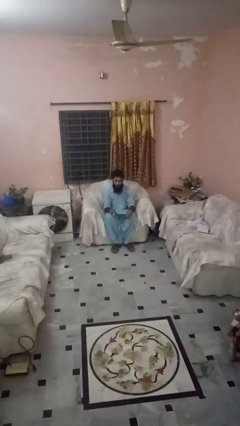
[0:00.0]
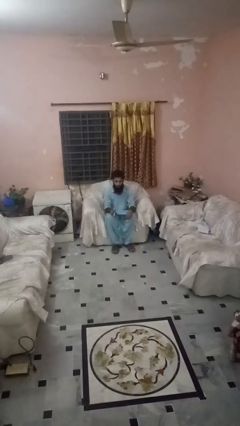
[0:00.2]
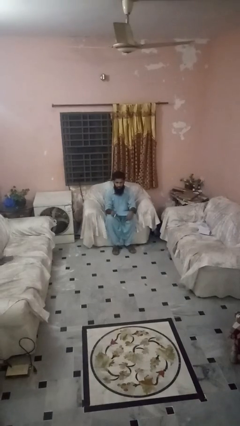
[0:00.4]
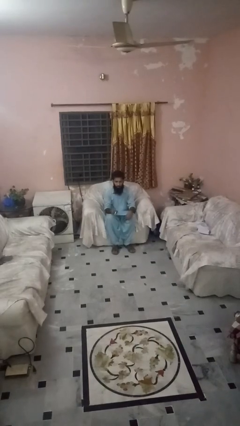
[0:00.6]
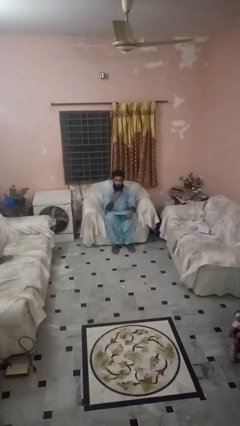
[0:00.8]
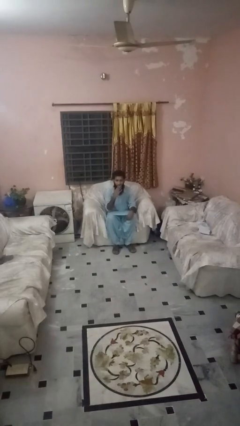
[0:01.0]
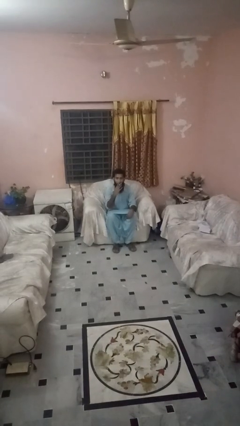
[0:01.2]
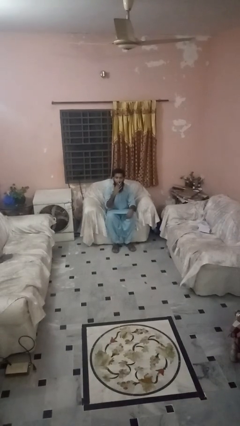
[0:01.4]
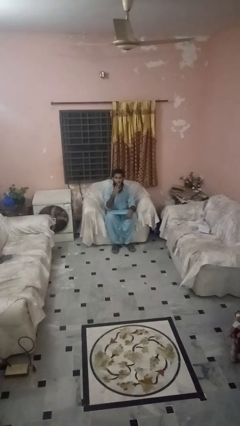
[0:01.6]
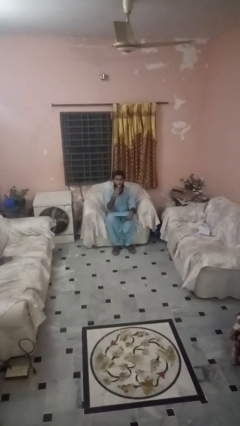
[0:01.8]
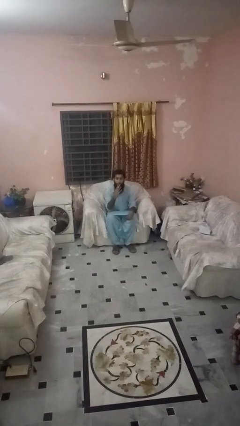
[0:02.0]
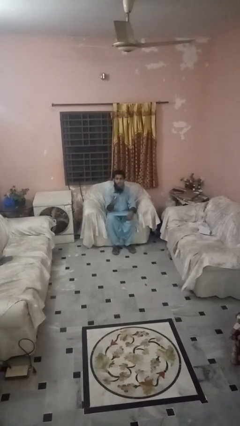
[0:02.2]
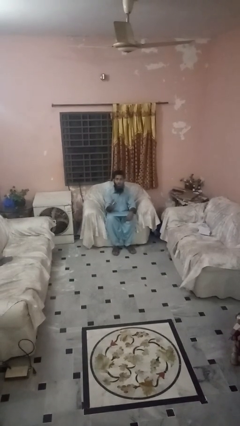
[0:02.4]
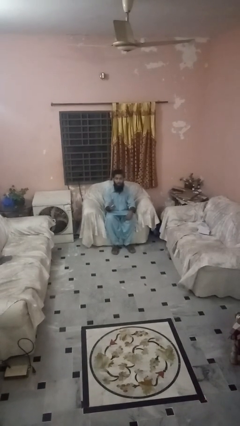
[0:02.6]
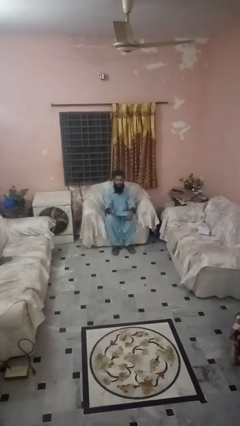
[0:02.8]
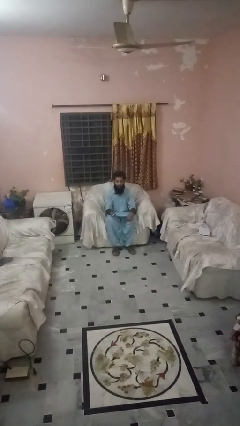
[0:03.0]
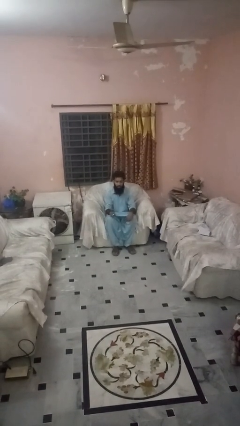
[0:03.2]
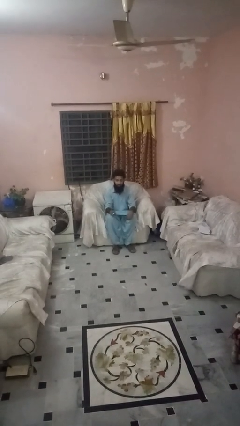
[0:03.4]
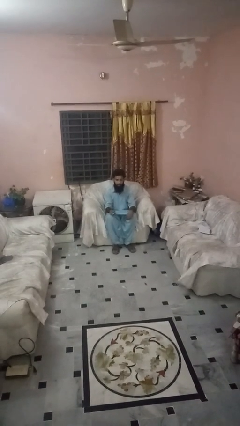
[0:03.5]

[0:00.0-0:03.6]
person vapes

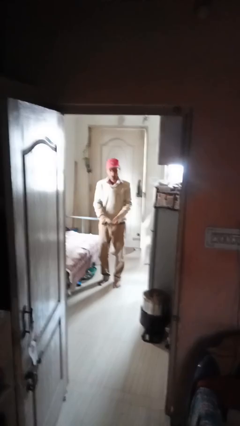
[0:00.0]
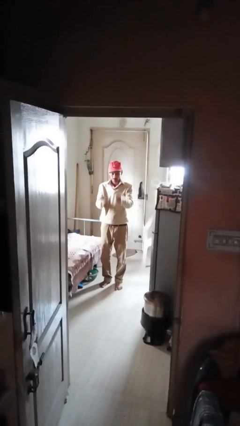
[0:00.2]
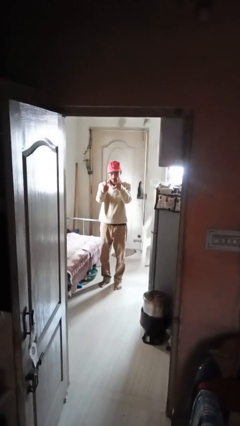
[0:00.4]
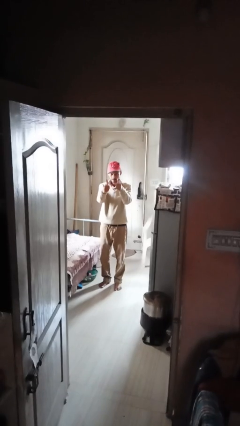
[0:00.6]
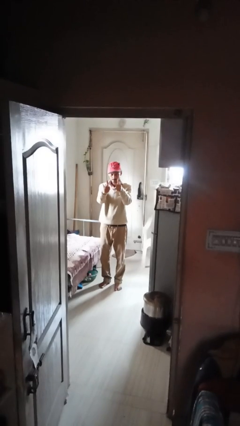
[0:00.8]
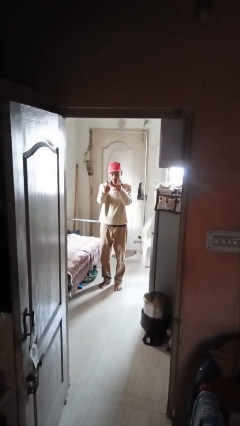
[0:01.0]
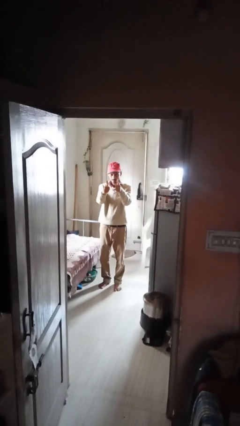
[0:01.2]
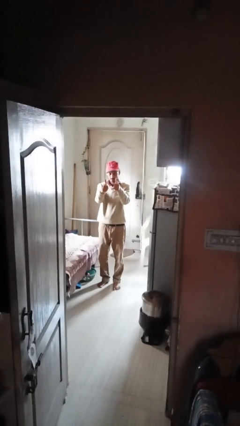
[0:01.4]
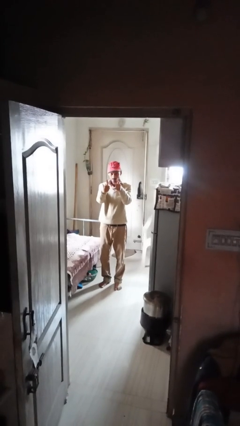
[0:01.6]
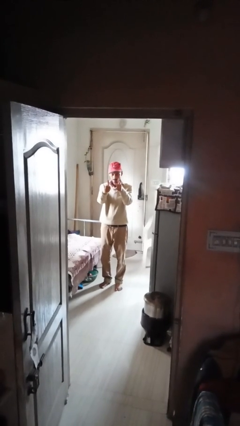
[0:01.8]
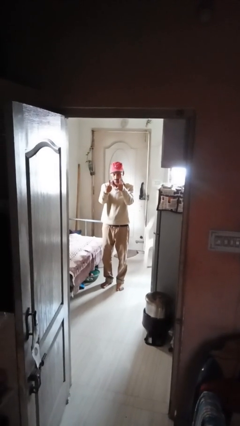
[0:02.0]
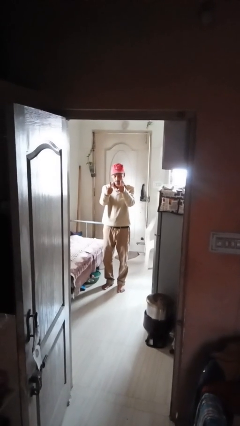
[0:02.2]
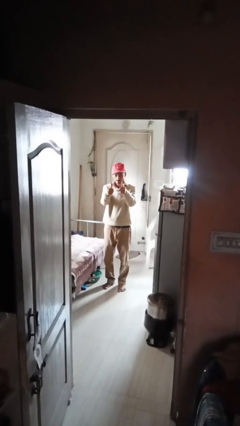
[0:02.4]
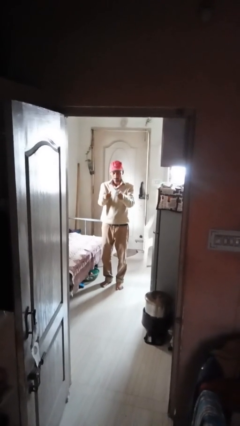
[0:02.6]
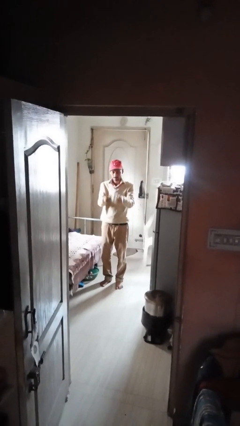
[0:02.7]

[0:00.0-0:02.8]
person gestures thumbs up

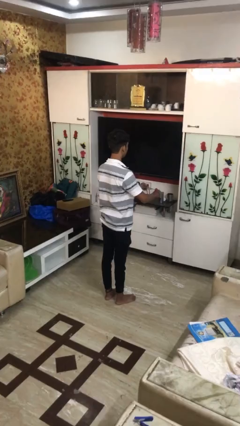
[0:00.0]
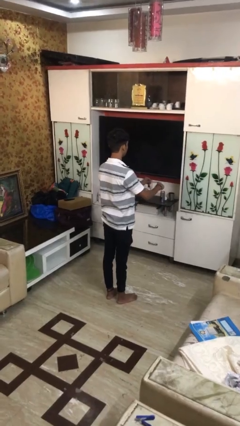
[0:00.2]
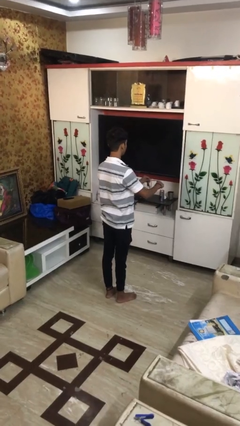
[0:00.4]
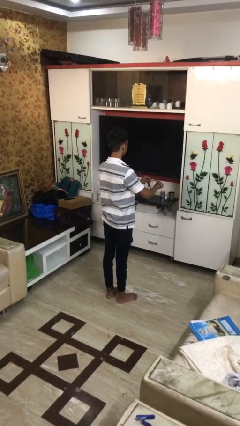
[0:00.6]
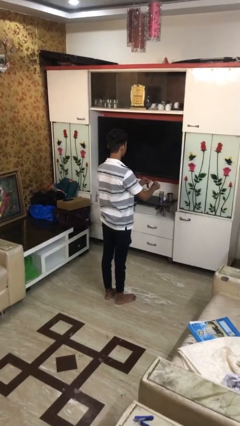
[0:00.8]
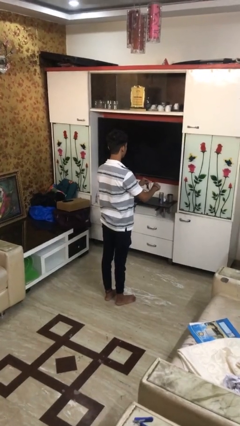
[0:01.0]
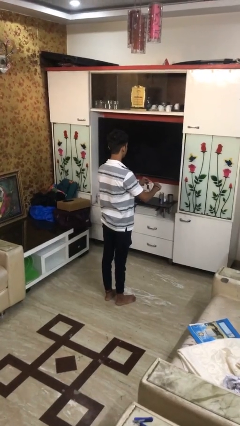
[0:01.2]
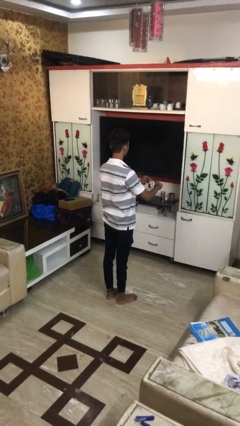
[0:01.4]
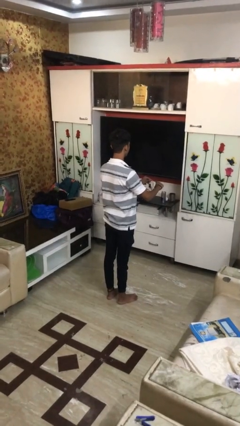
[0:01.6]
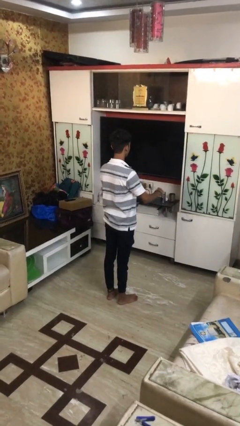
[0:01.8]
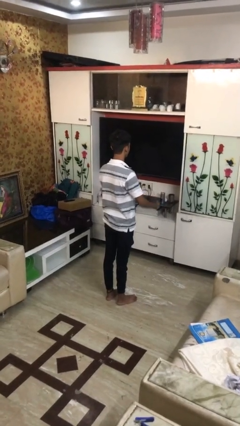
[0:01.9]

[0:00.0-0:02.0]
person files fingernails

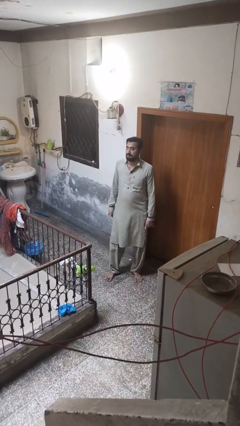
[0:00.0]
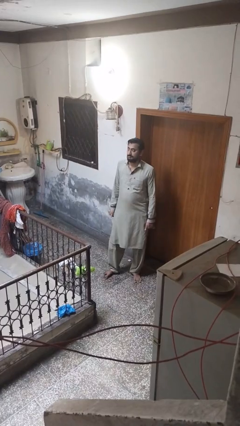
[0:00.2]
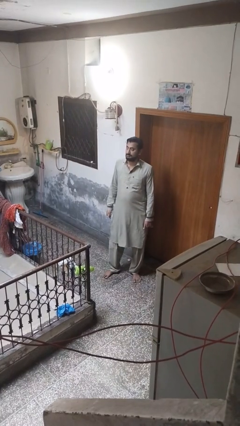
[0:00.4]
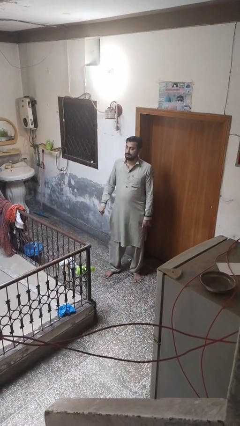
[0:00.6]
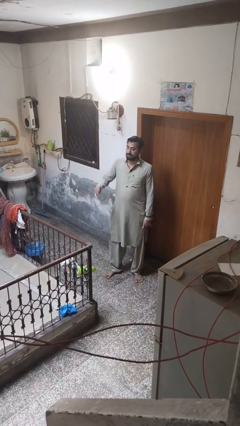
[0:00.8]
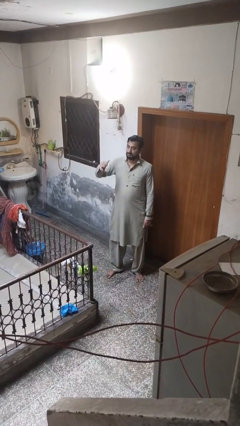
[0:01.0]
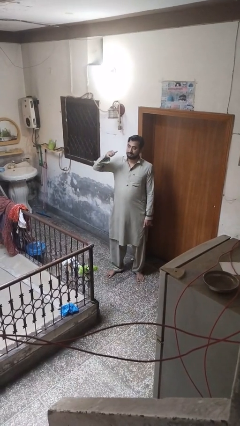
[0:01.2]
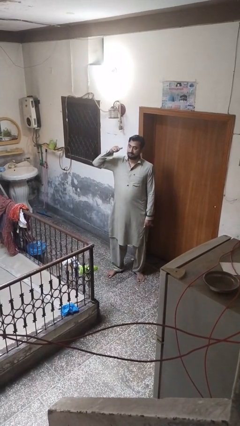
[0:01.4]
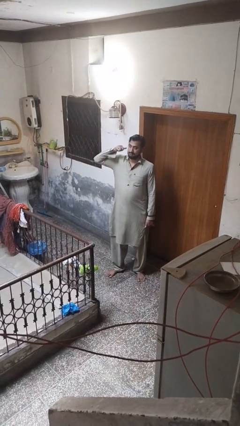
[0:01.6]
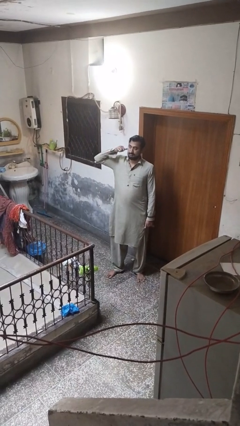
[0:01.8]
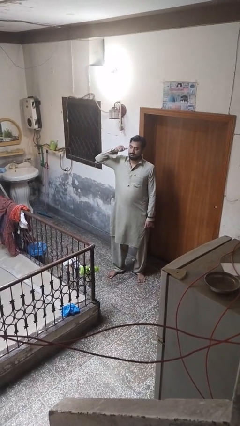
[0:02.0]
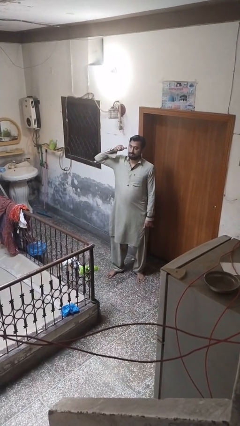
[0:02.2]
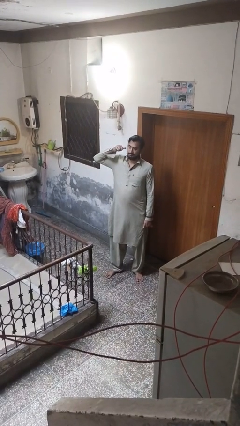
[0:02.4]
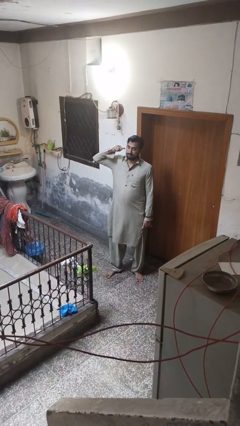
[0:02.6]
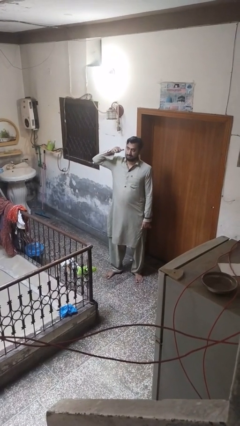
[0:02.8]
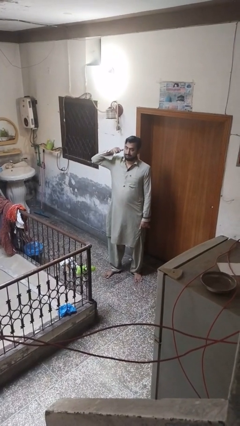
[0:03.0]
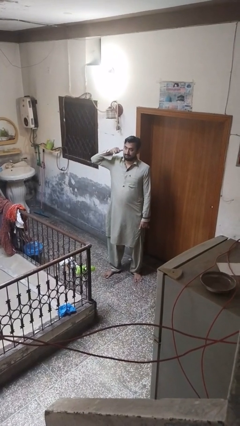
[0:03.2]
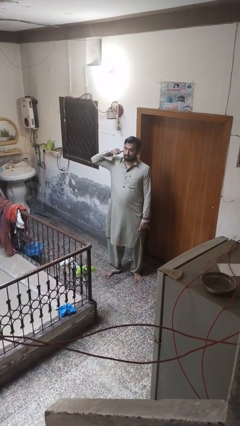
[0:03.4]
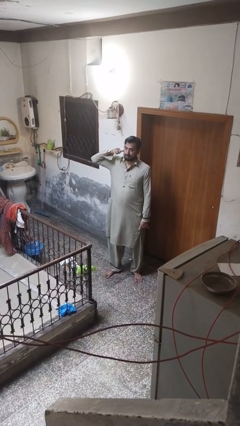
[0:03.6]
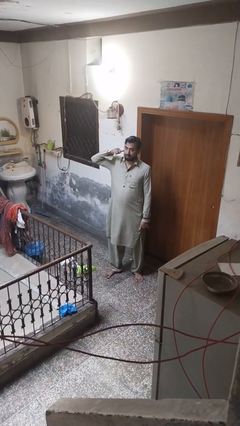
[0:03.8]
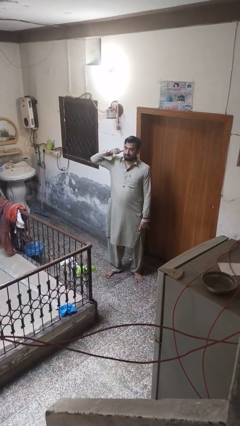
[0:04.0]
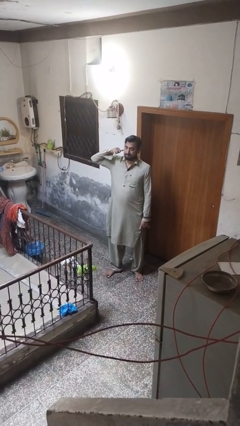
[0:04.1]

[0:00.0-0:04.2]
person gestures call me

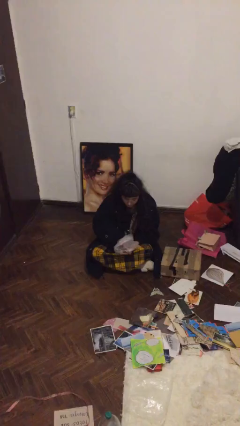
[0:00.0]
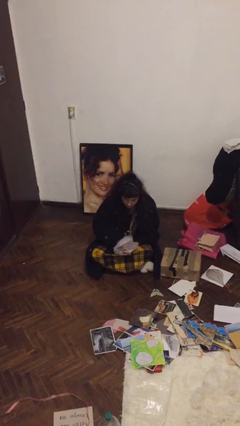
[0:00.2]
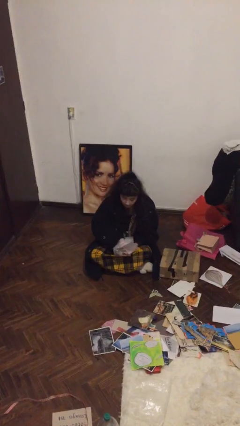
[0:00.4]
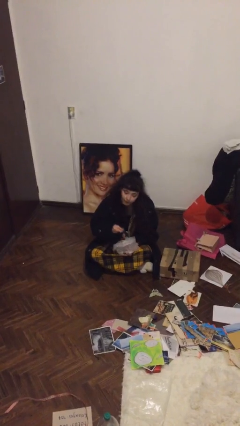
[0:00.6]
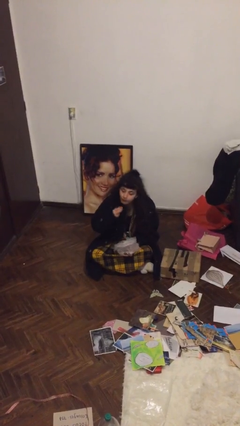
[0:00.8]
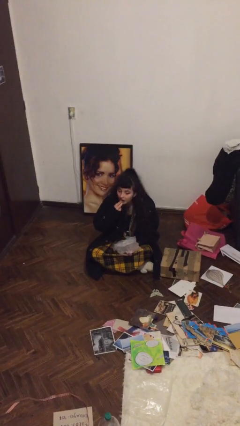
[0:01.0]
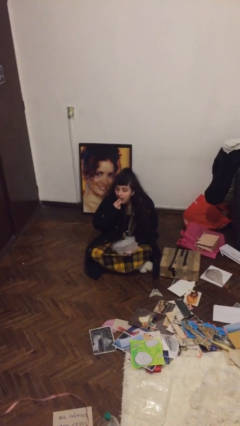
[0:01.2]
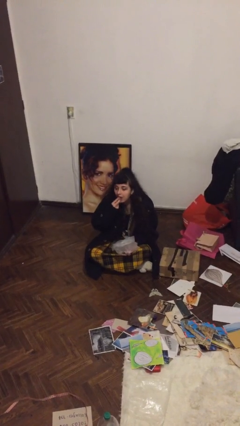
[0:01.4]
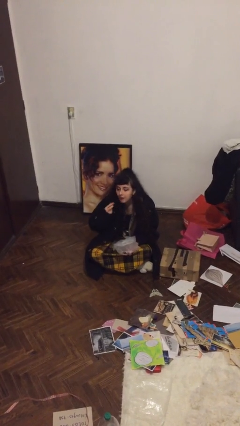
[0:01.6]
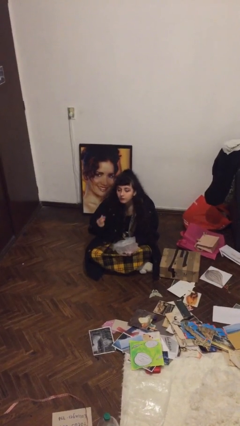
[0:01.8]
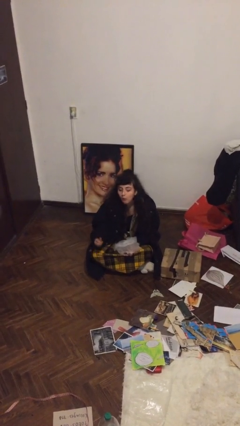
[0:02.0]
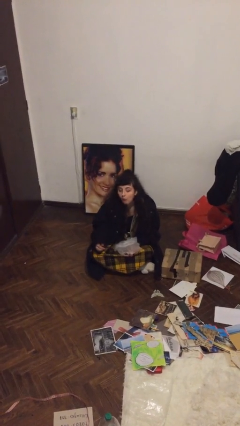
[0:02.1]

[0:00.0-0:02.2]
person eats snack from bag

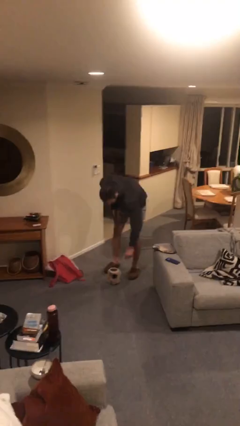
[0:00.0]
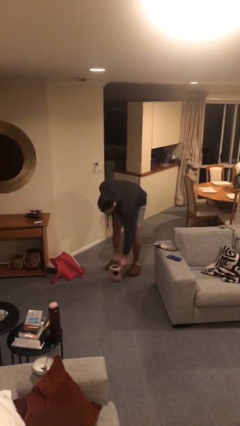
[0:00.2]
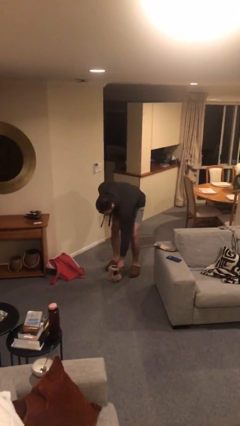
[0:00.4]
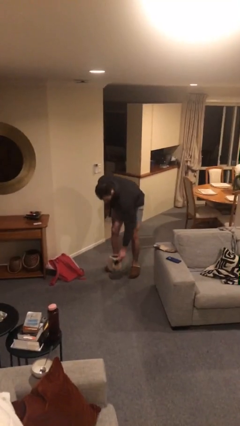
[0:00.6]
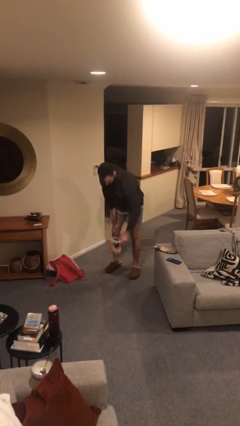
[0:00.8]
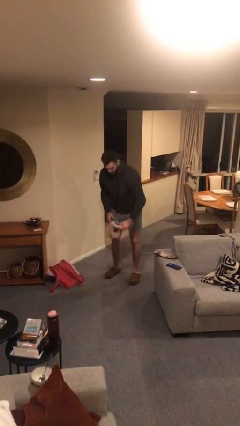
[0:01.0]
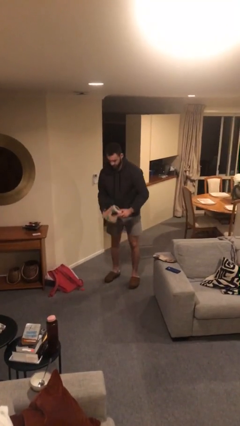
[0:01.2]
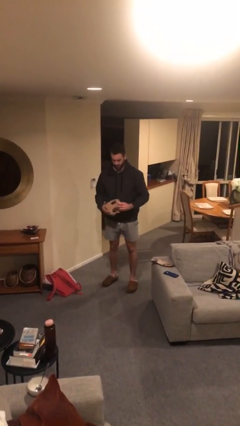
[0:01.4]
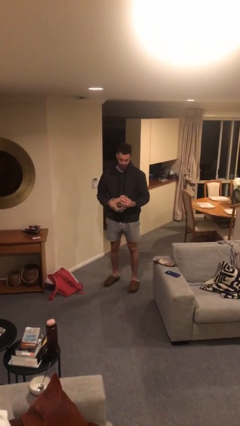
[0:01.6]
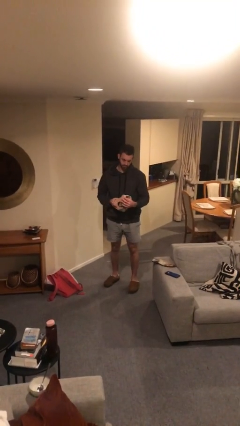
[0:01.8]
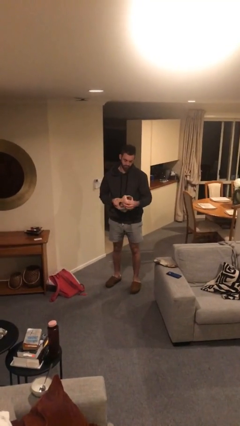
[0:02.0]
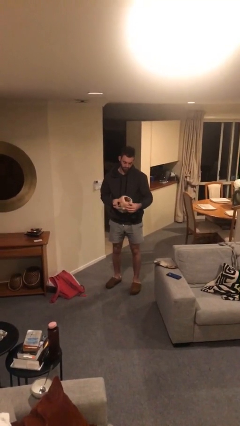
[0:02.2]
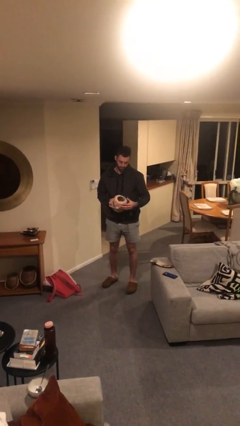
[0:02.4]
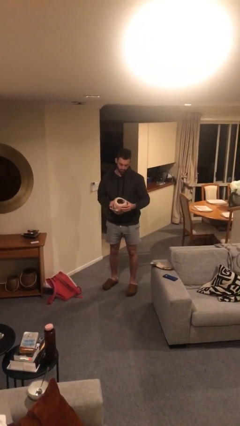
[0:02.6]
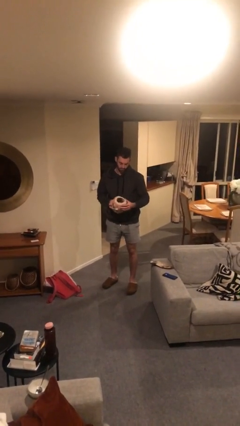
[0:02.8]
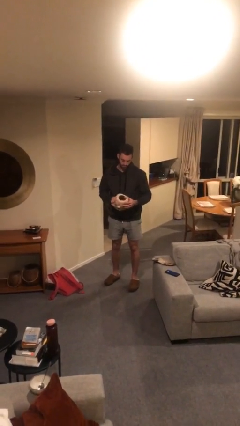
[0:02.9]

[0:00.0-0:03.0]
person picks up object from floor
